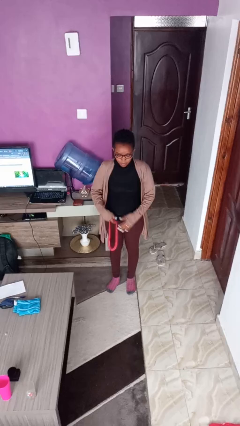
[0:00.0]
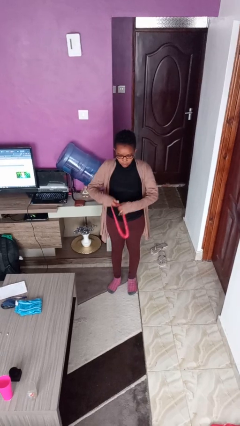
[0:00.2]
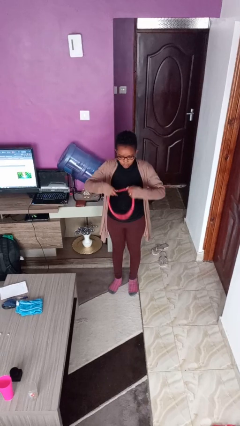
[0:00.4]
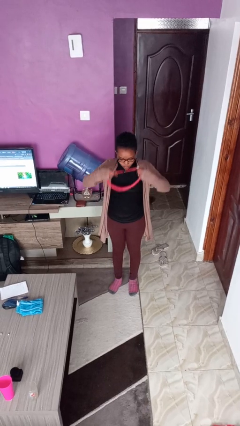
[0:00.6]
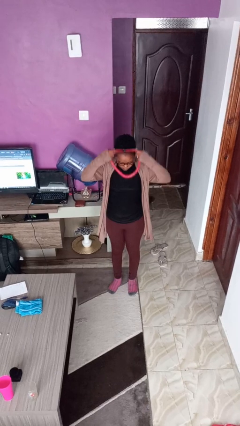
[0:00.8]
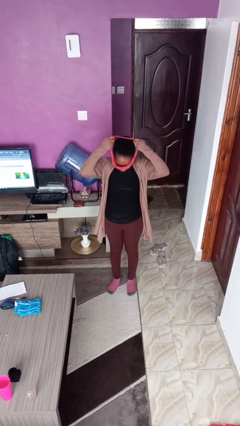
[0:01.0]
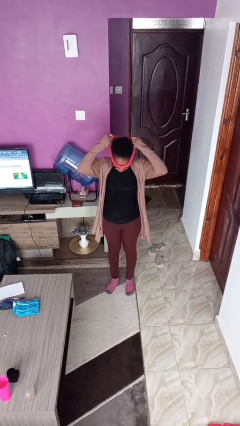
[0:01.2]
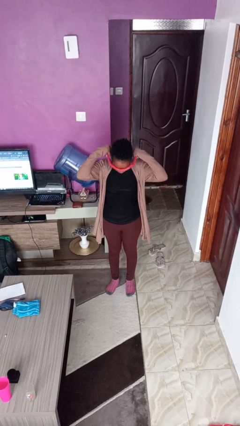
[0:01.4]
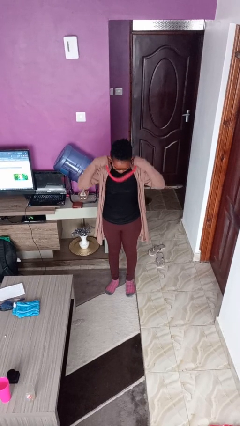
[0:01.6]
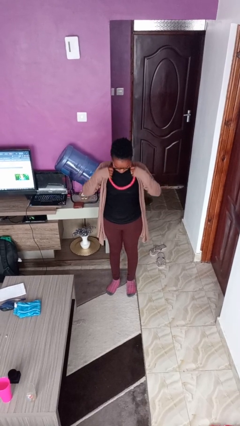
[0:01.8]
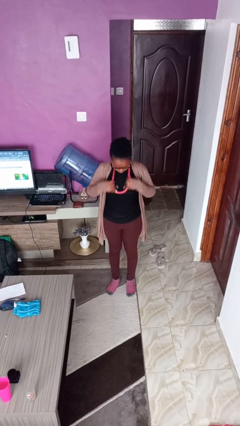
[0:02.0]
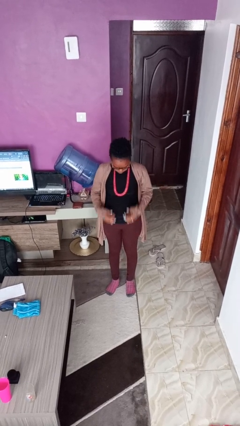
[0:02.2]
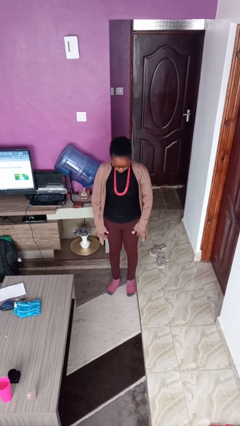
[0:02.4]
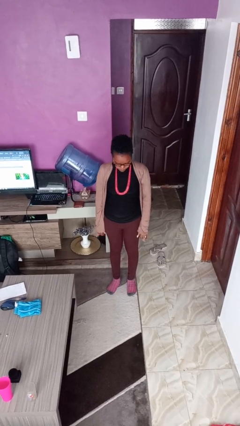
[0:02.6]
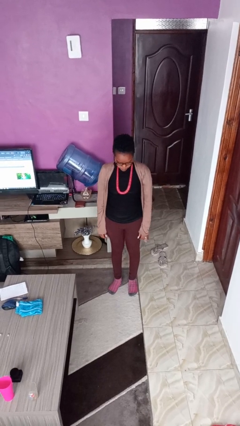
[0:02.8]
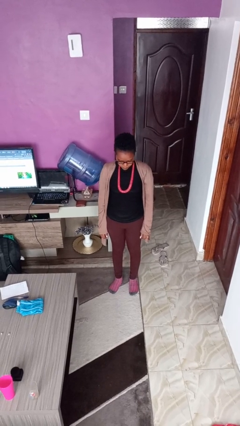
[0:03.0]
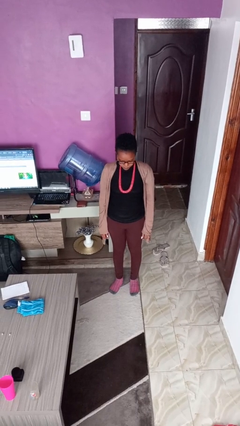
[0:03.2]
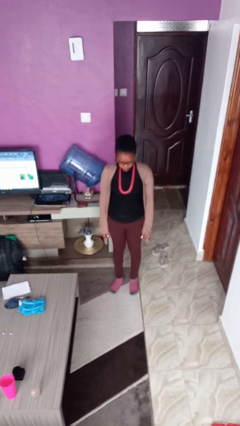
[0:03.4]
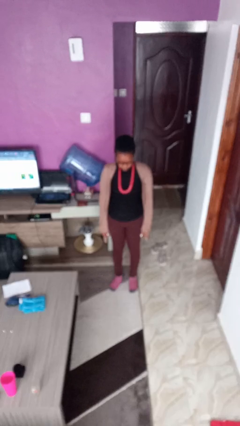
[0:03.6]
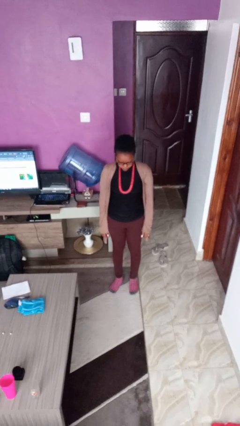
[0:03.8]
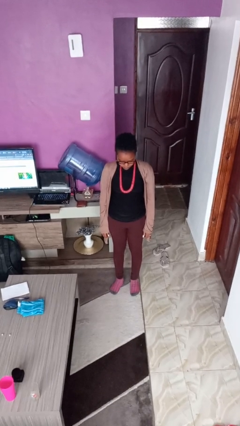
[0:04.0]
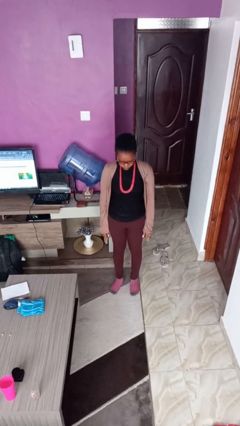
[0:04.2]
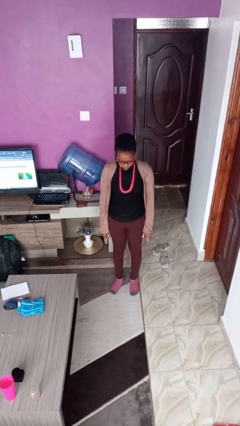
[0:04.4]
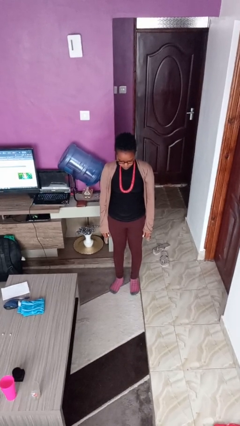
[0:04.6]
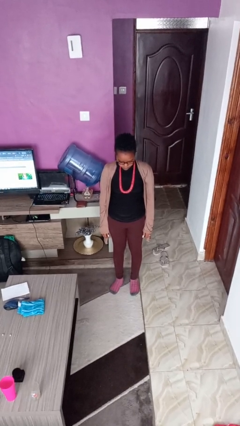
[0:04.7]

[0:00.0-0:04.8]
person puts on necklace

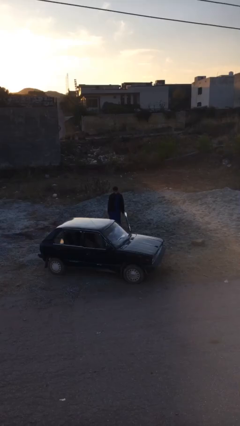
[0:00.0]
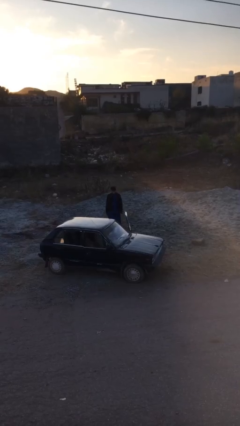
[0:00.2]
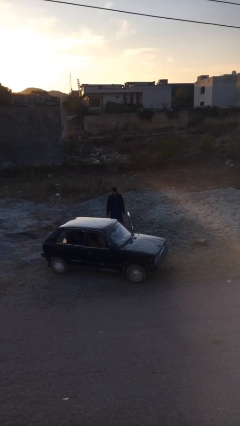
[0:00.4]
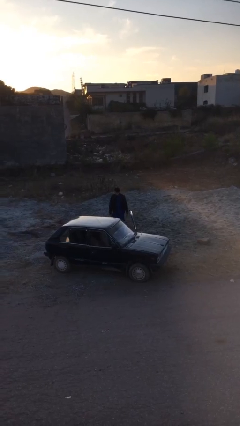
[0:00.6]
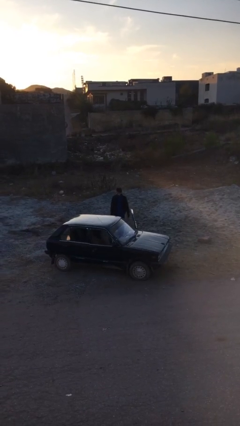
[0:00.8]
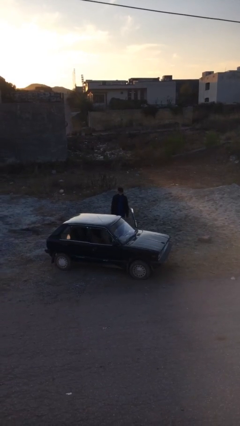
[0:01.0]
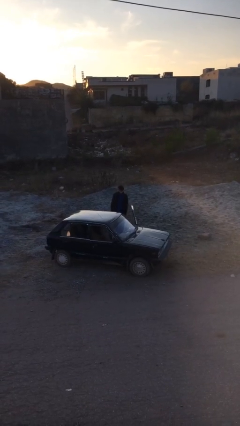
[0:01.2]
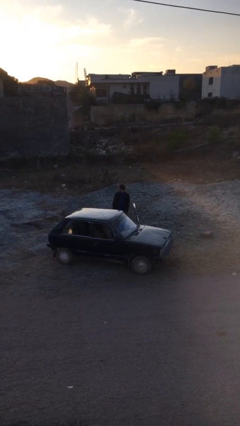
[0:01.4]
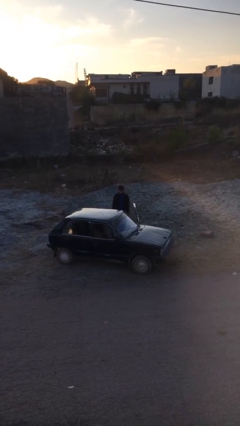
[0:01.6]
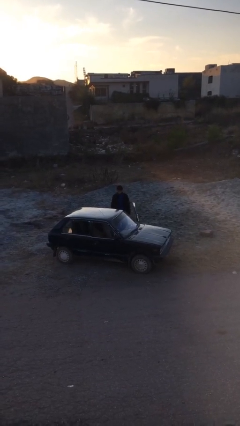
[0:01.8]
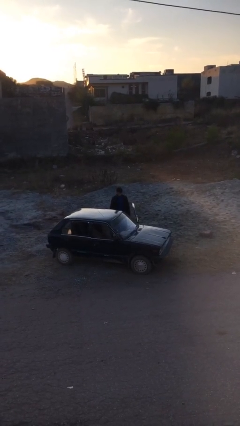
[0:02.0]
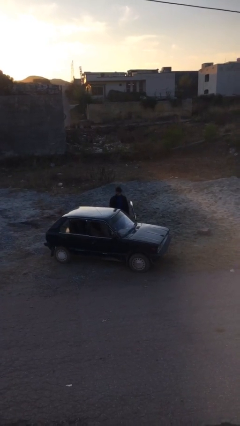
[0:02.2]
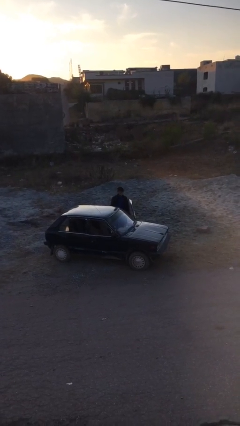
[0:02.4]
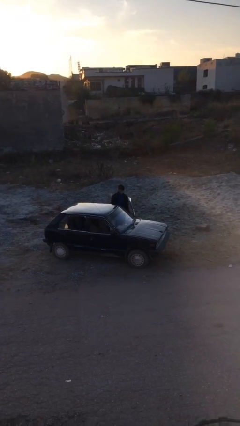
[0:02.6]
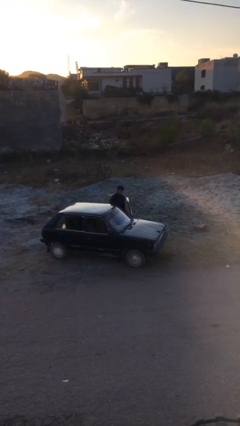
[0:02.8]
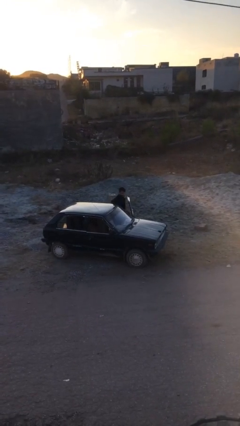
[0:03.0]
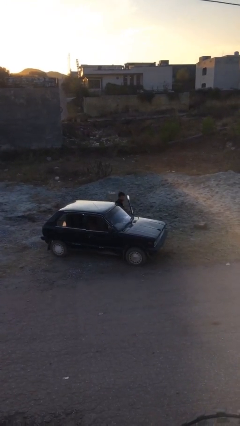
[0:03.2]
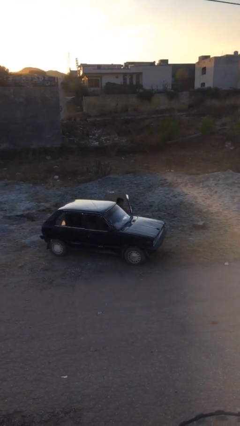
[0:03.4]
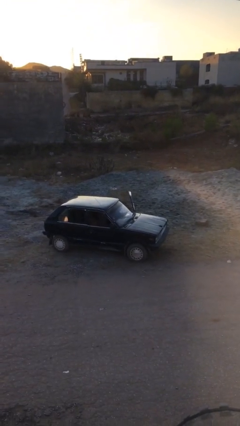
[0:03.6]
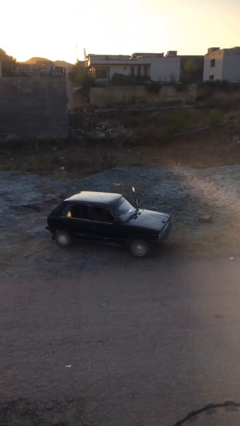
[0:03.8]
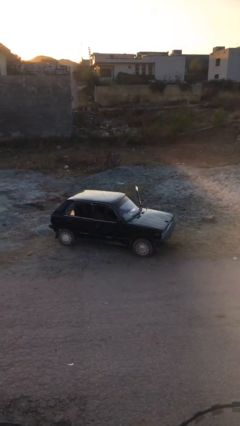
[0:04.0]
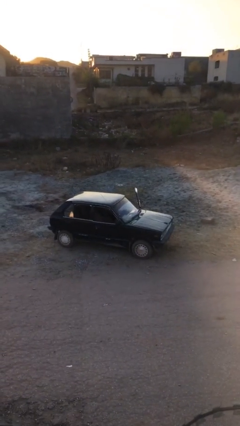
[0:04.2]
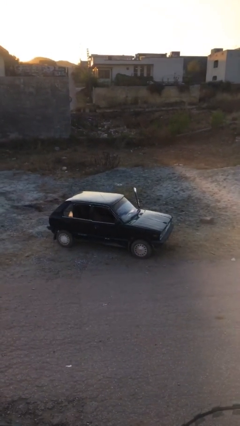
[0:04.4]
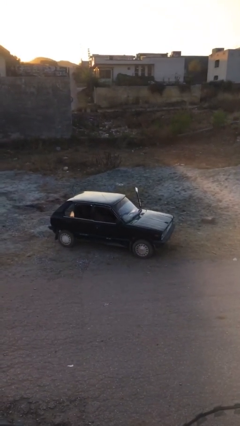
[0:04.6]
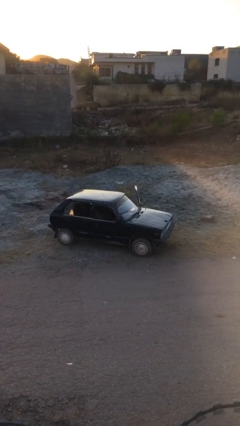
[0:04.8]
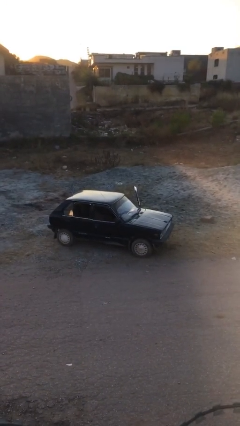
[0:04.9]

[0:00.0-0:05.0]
person enters car

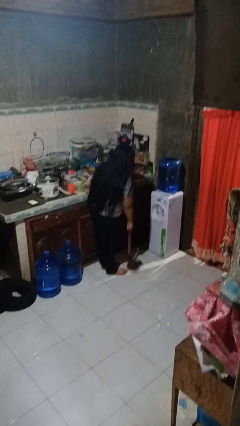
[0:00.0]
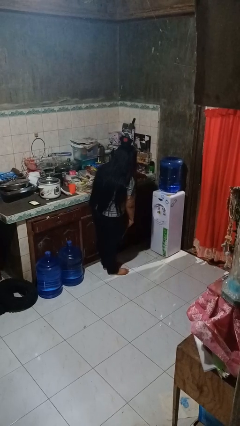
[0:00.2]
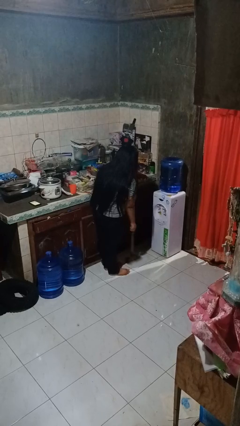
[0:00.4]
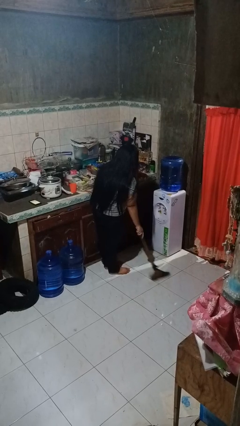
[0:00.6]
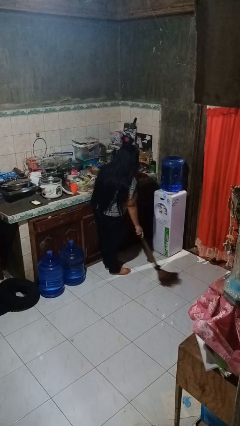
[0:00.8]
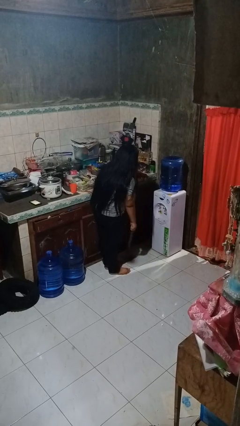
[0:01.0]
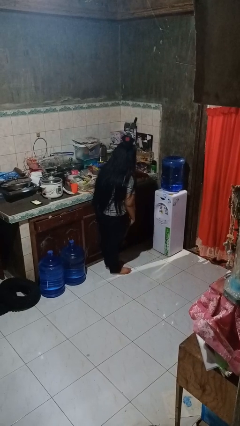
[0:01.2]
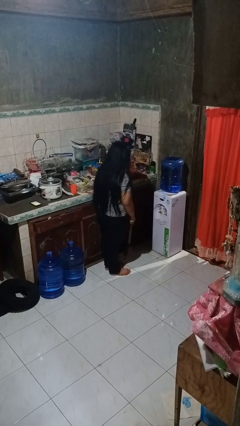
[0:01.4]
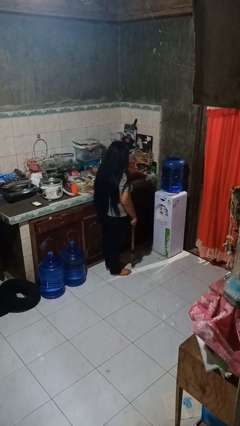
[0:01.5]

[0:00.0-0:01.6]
person sweeps floor

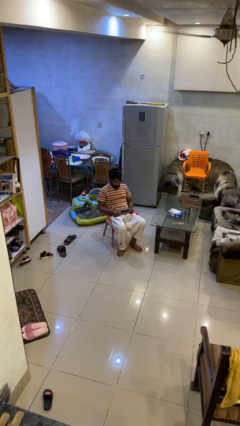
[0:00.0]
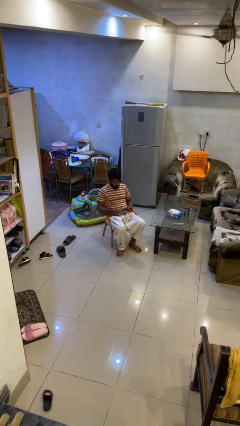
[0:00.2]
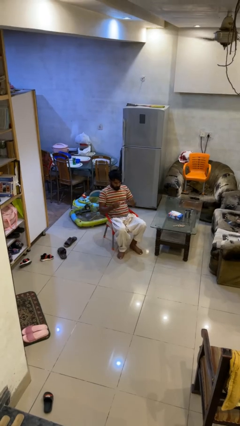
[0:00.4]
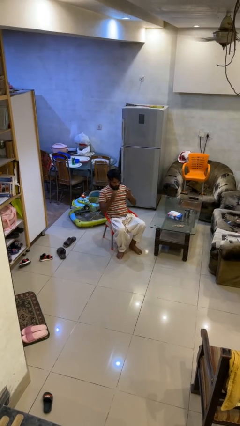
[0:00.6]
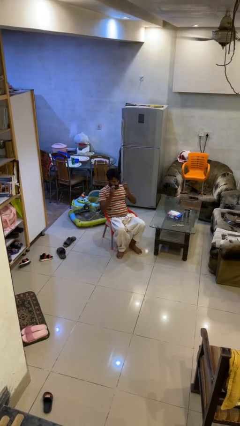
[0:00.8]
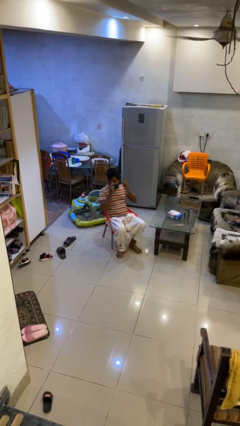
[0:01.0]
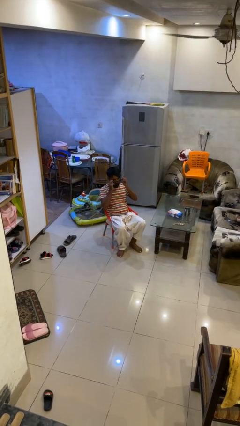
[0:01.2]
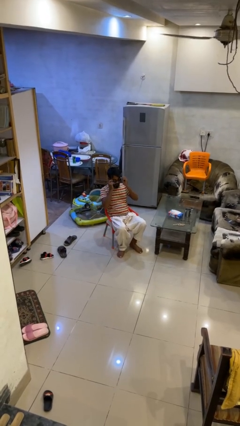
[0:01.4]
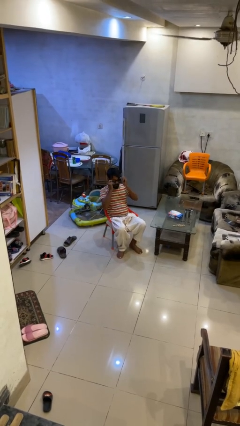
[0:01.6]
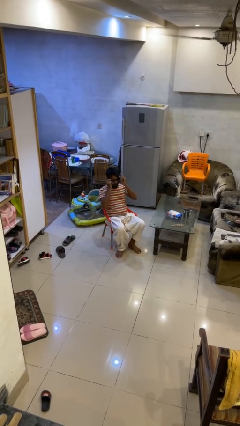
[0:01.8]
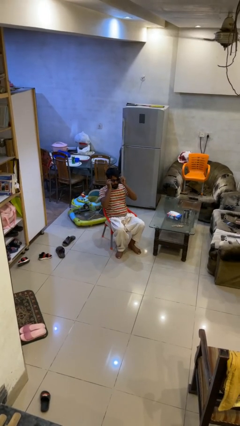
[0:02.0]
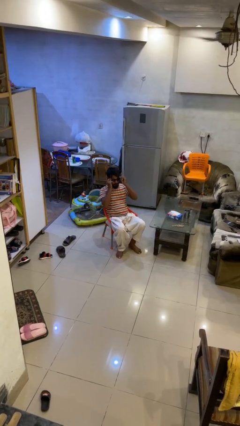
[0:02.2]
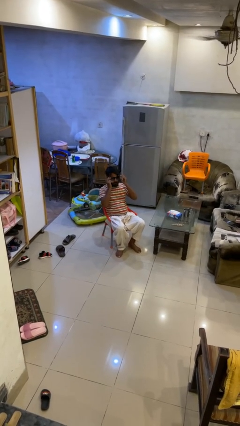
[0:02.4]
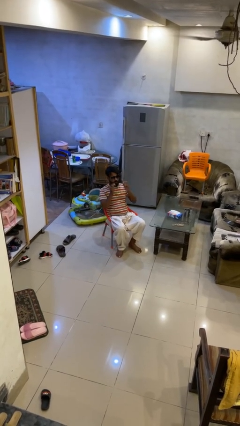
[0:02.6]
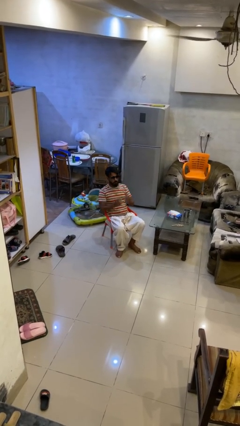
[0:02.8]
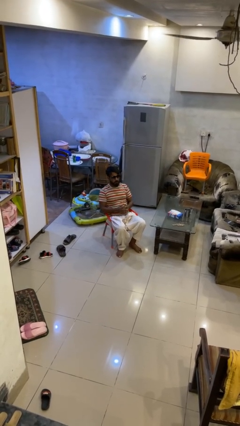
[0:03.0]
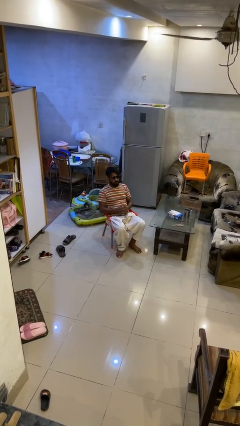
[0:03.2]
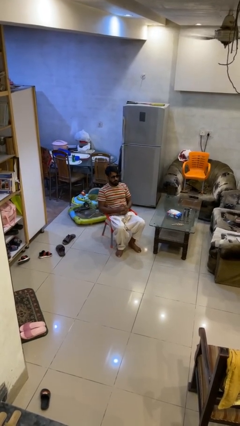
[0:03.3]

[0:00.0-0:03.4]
person puts on sunglasses

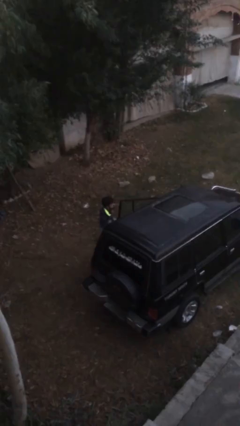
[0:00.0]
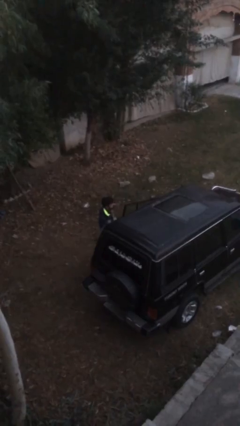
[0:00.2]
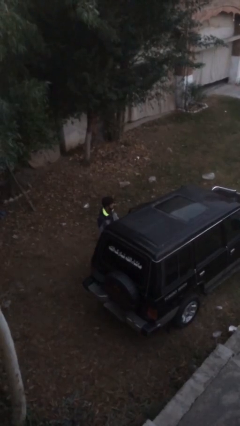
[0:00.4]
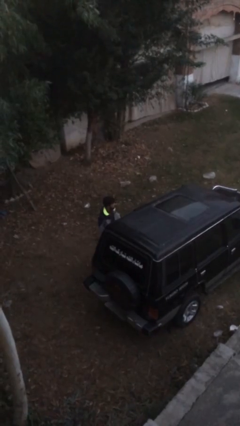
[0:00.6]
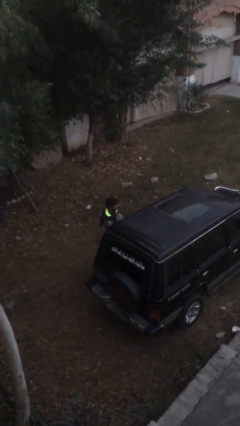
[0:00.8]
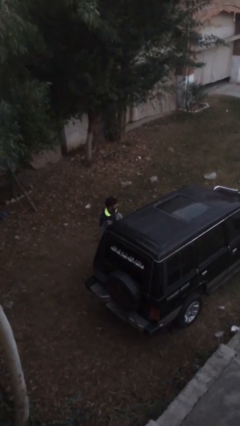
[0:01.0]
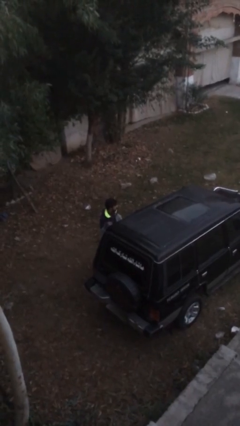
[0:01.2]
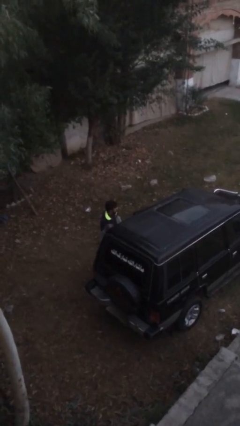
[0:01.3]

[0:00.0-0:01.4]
person closes car door

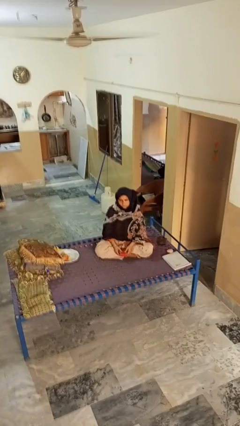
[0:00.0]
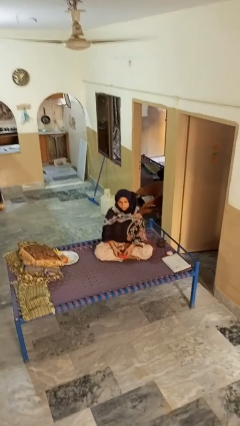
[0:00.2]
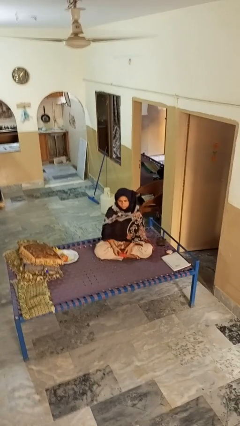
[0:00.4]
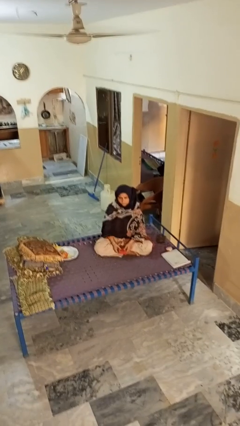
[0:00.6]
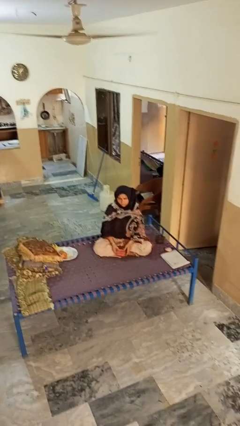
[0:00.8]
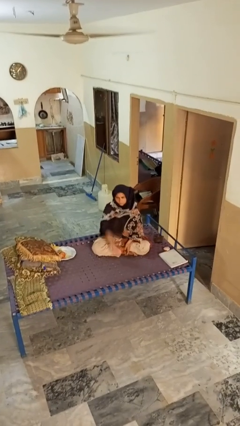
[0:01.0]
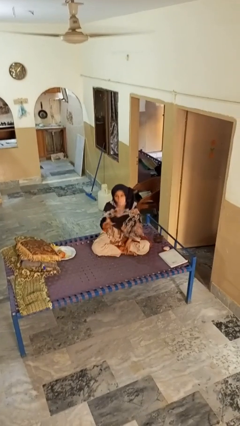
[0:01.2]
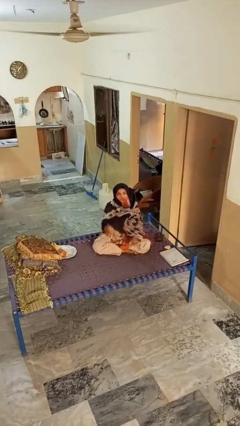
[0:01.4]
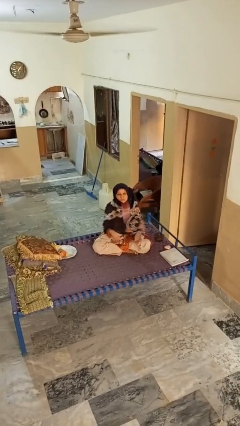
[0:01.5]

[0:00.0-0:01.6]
person drops object
